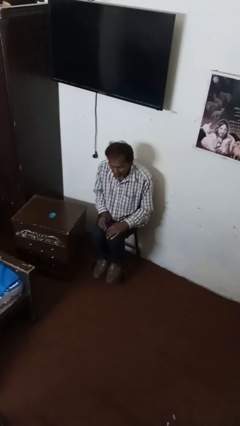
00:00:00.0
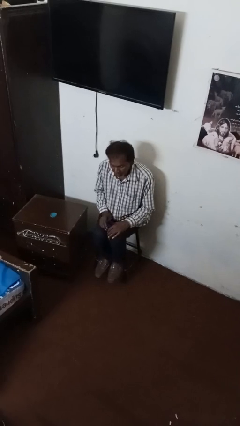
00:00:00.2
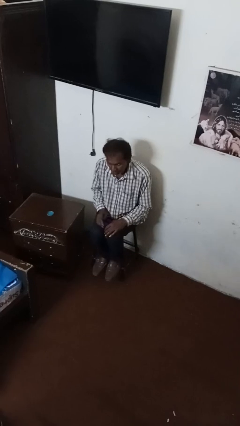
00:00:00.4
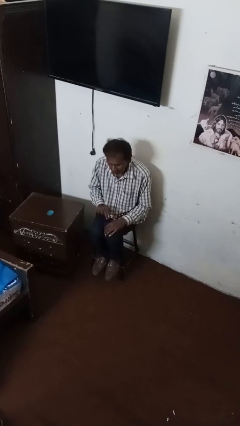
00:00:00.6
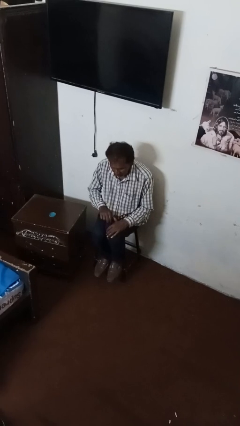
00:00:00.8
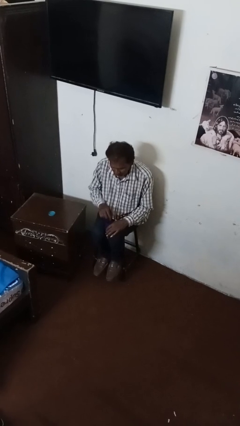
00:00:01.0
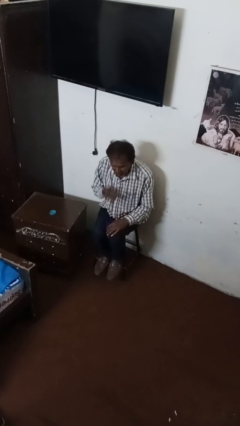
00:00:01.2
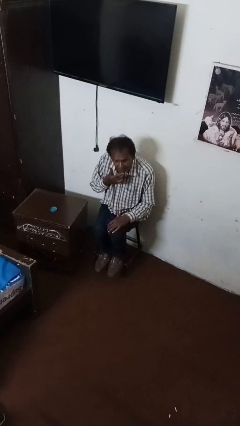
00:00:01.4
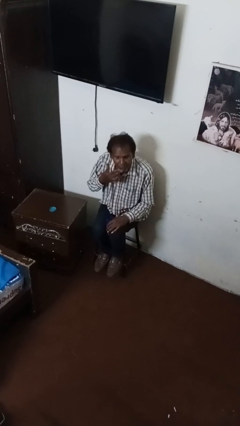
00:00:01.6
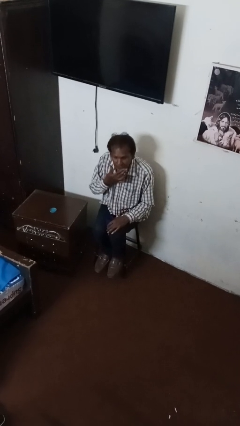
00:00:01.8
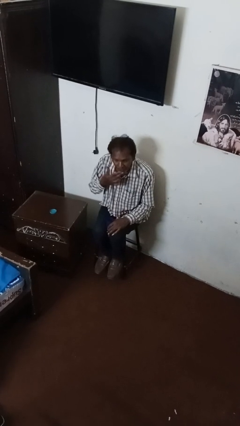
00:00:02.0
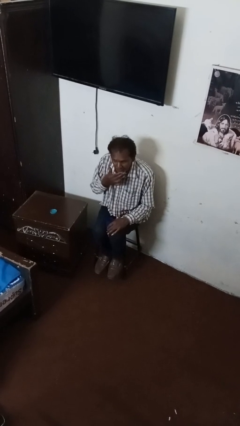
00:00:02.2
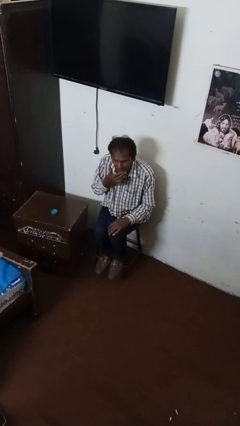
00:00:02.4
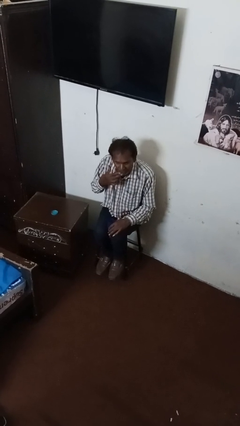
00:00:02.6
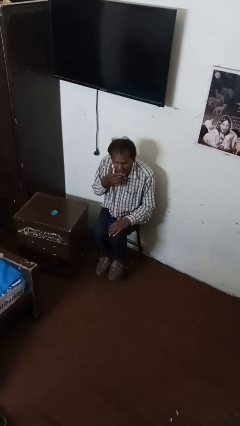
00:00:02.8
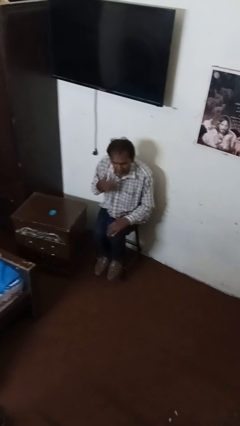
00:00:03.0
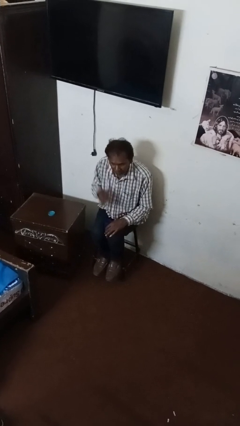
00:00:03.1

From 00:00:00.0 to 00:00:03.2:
person strokes chin

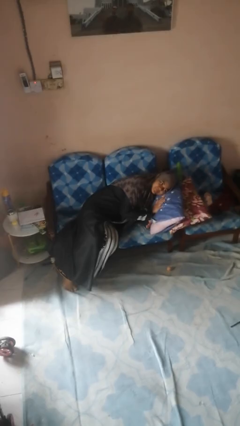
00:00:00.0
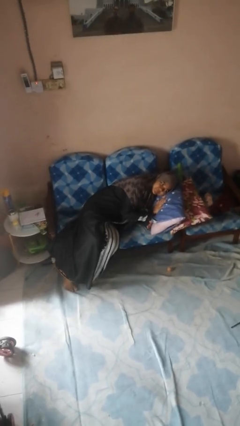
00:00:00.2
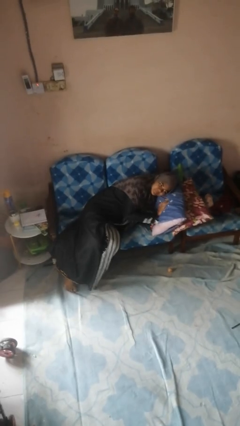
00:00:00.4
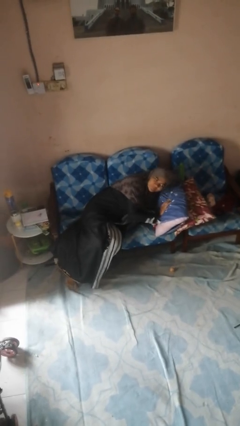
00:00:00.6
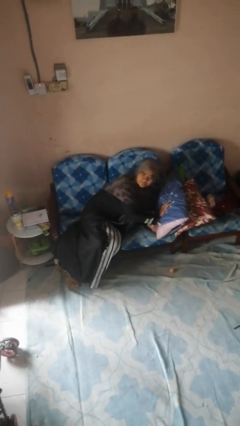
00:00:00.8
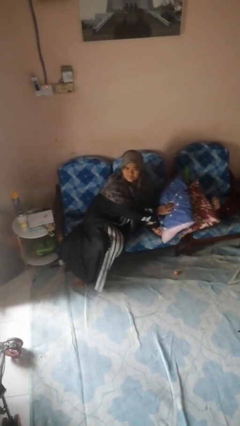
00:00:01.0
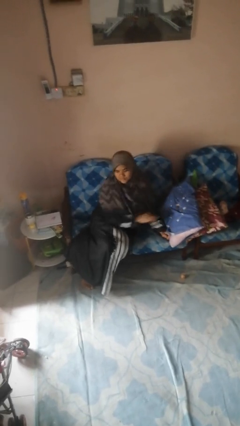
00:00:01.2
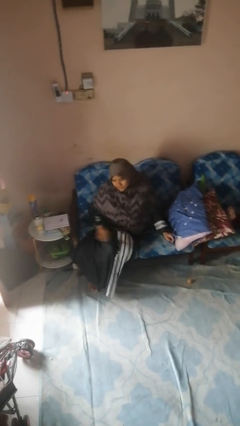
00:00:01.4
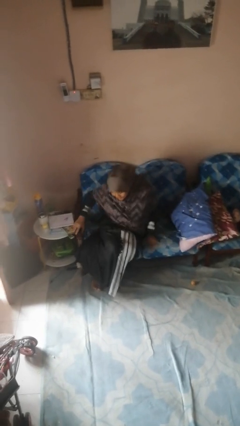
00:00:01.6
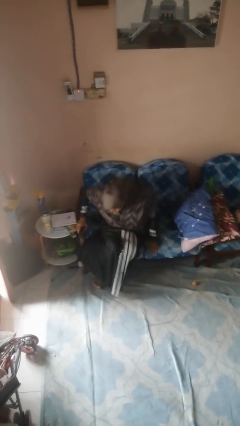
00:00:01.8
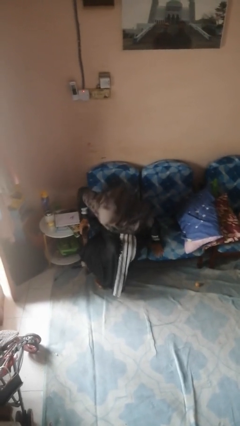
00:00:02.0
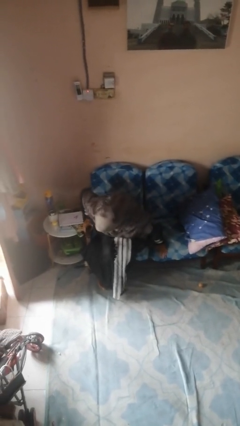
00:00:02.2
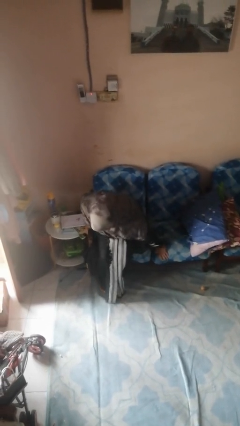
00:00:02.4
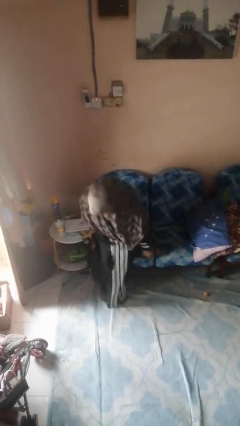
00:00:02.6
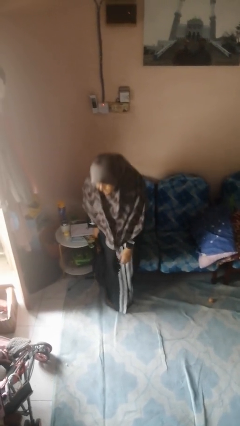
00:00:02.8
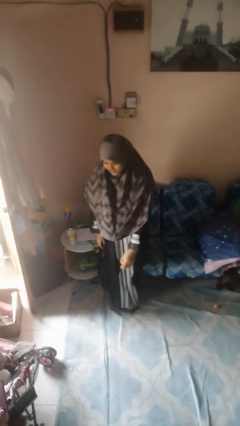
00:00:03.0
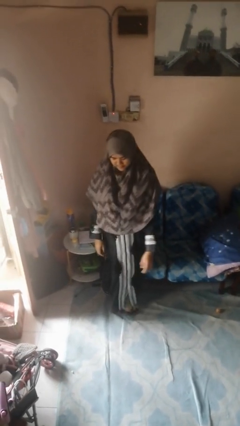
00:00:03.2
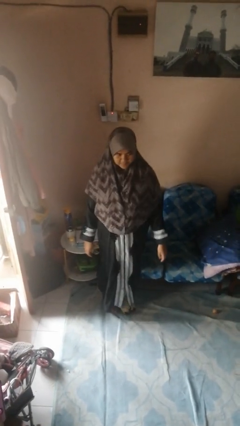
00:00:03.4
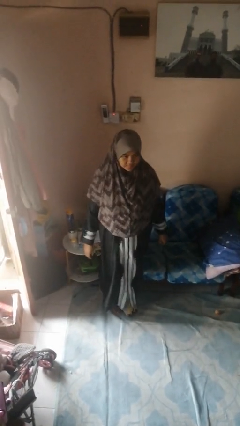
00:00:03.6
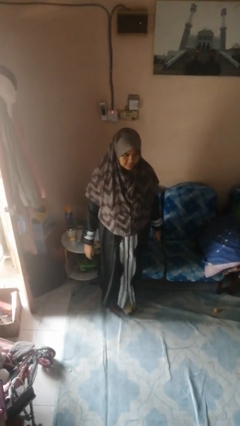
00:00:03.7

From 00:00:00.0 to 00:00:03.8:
person stands up

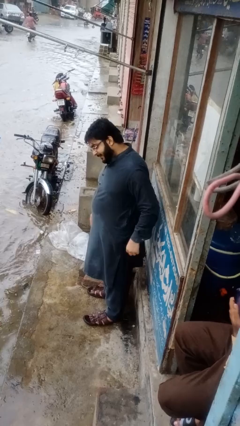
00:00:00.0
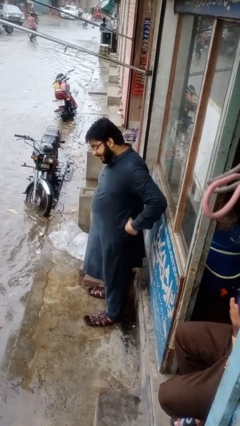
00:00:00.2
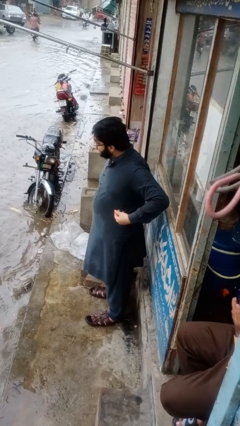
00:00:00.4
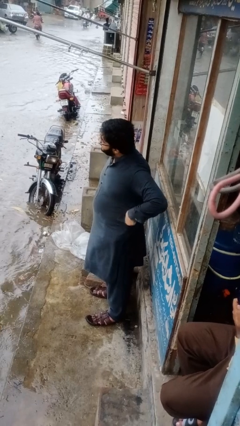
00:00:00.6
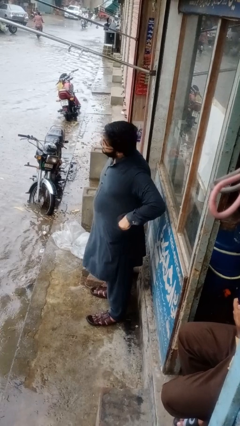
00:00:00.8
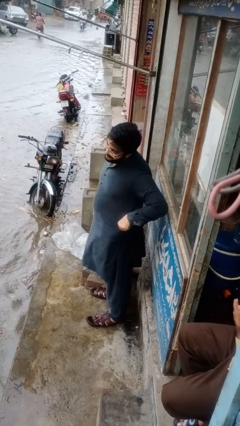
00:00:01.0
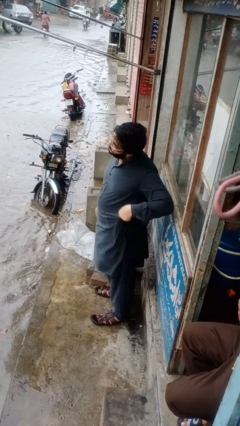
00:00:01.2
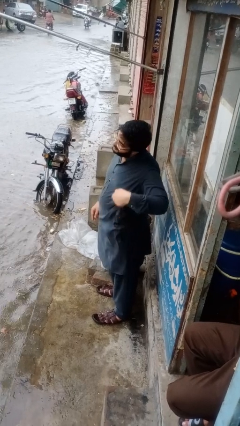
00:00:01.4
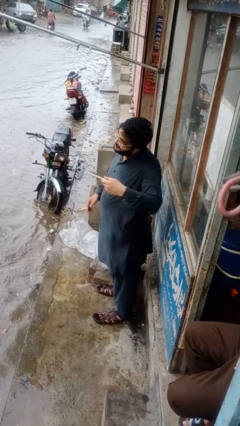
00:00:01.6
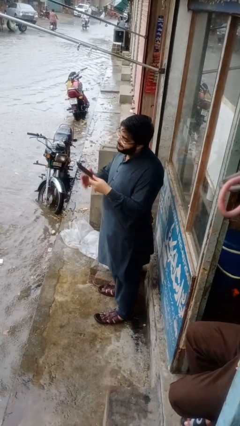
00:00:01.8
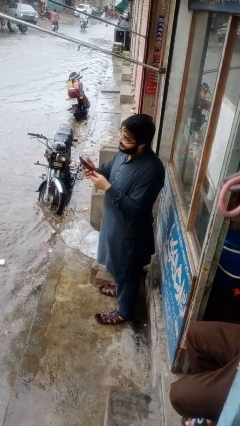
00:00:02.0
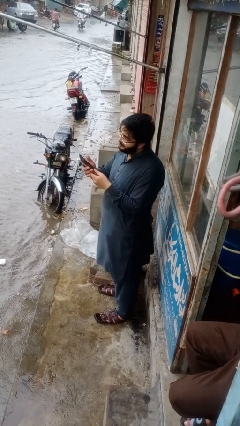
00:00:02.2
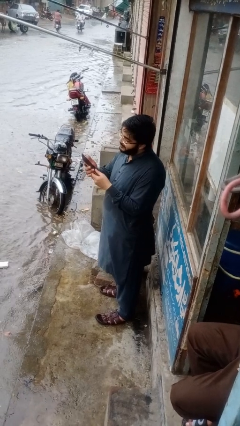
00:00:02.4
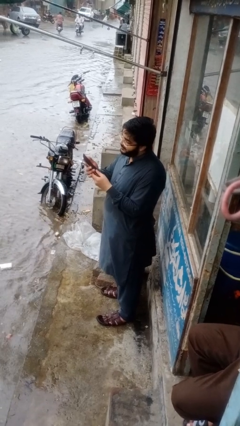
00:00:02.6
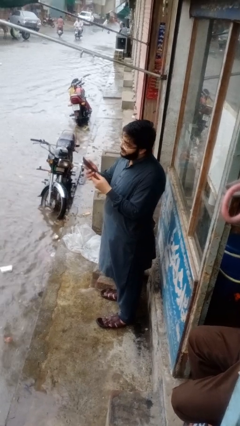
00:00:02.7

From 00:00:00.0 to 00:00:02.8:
person takes phone from pocket

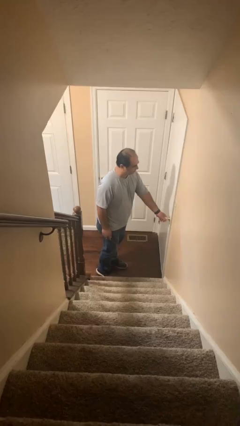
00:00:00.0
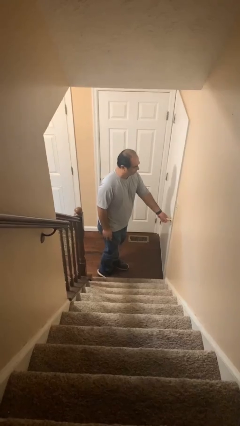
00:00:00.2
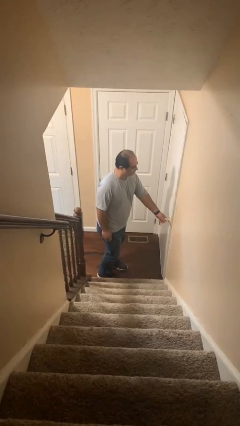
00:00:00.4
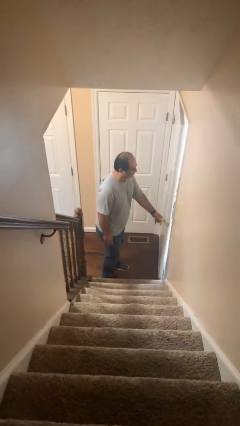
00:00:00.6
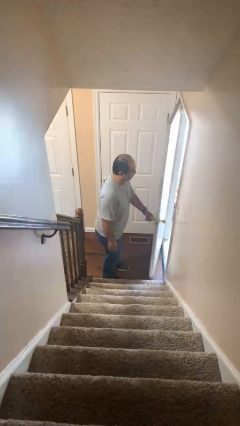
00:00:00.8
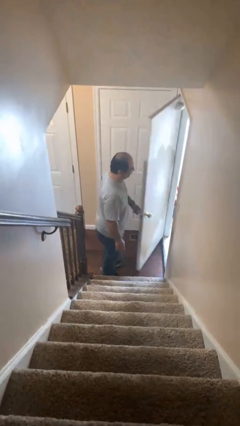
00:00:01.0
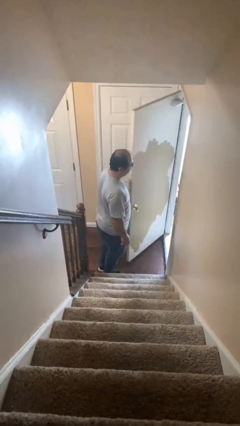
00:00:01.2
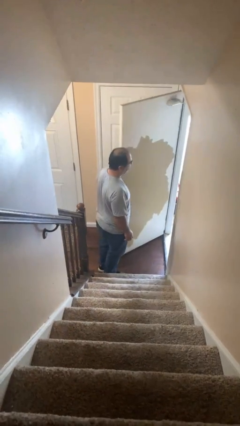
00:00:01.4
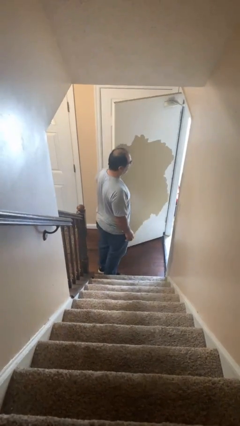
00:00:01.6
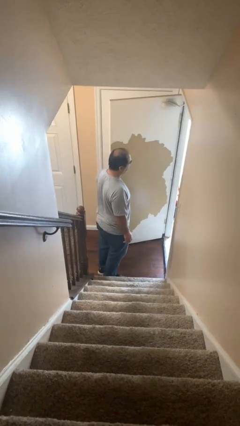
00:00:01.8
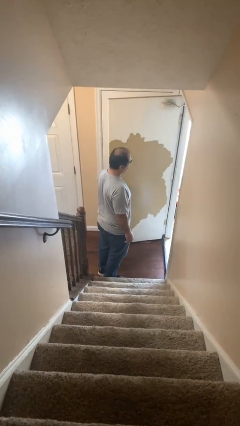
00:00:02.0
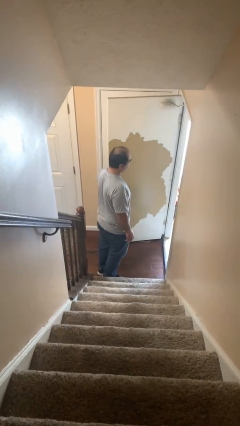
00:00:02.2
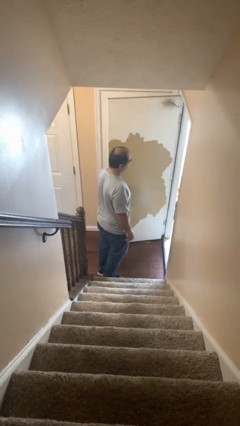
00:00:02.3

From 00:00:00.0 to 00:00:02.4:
person opens facility door

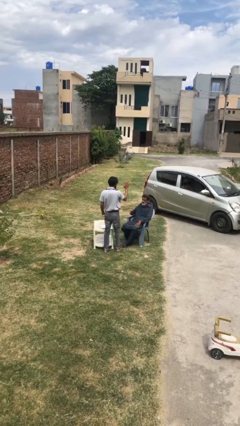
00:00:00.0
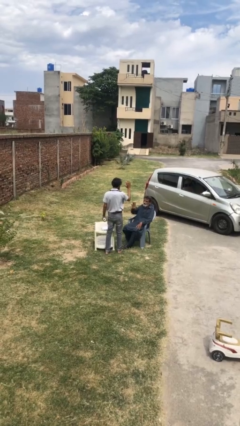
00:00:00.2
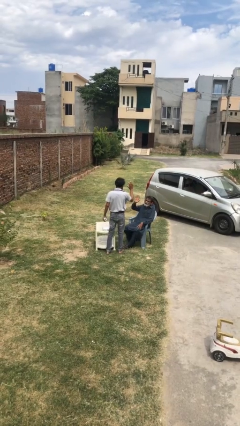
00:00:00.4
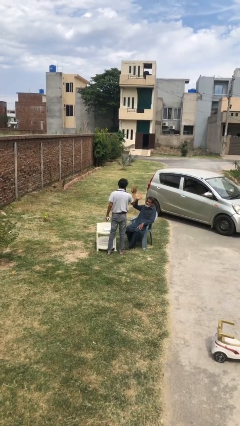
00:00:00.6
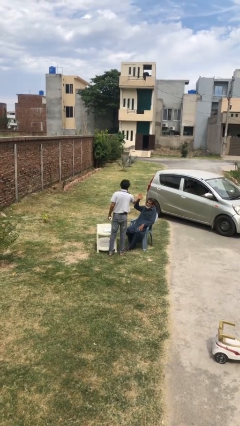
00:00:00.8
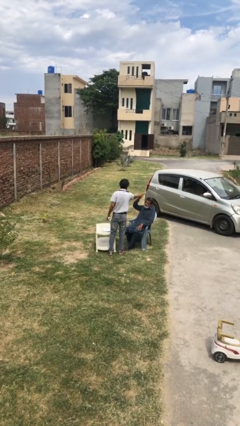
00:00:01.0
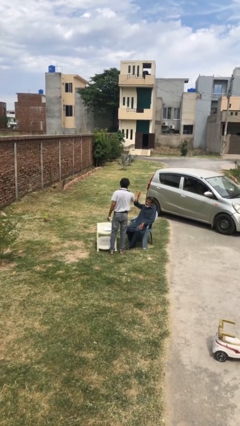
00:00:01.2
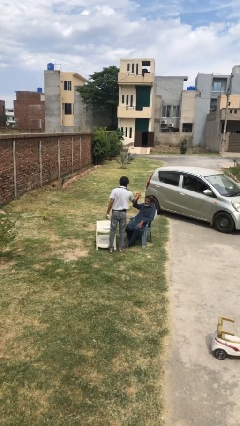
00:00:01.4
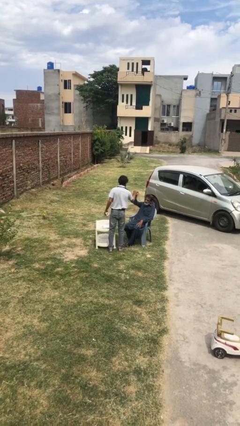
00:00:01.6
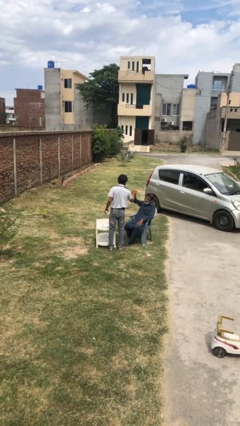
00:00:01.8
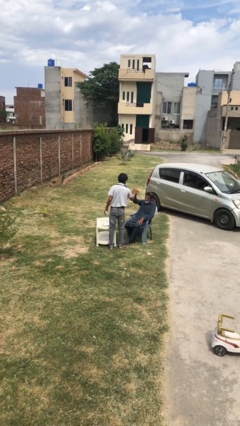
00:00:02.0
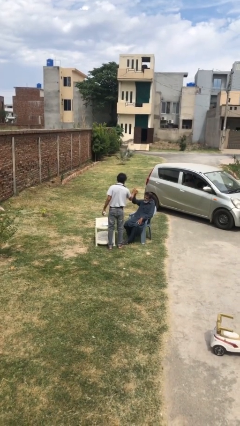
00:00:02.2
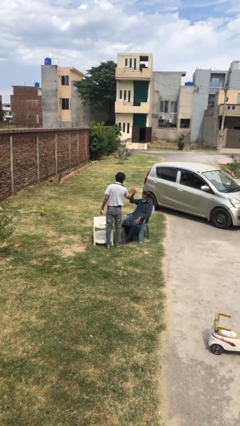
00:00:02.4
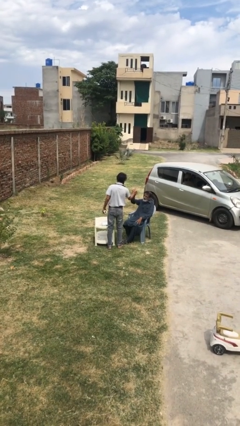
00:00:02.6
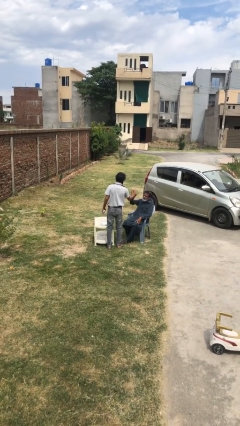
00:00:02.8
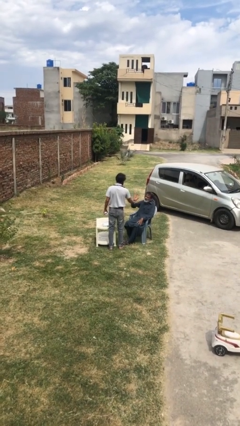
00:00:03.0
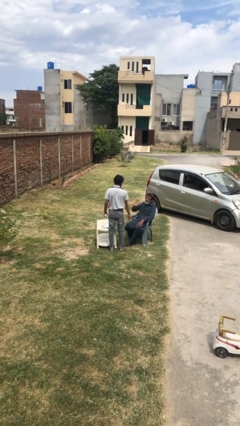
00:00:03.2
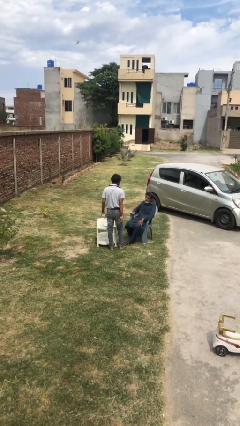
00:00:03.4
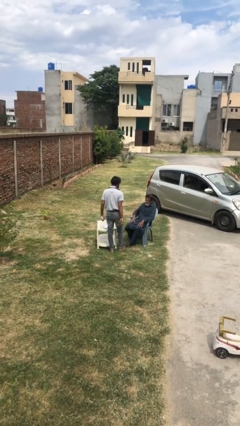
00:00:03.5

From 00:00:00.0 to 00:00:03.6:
person highfives hand

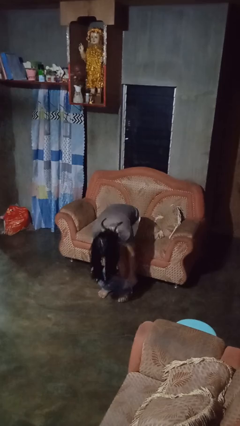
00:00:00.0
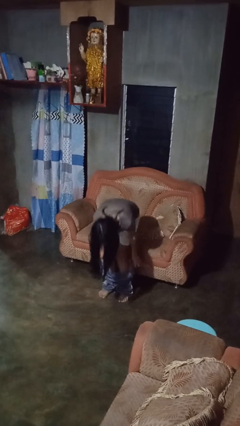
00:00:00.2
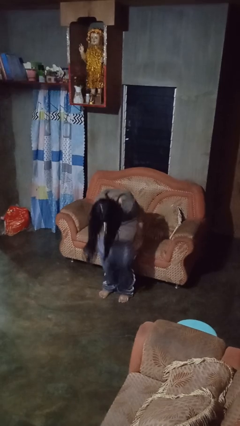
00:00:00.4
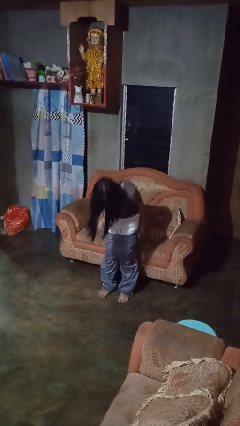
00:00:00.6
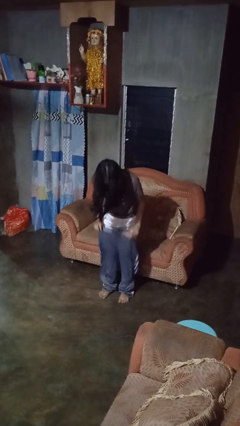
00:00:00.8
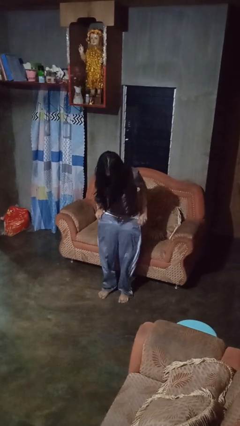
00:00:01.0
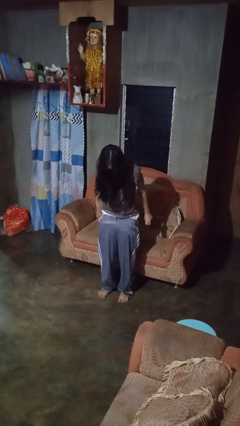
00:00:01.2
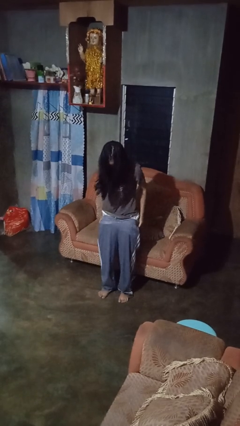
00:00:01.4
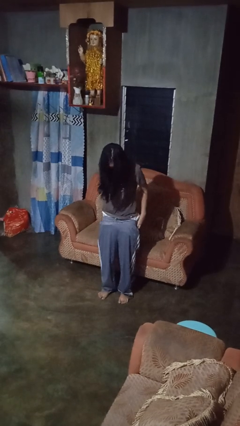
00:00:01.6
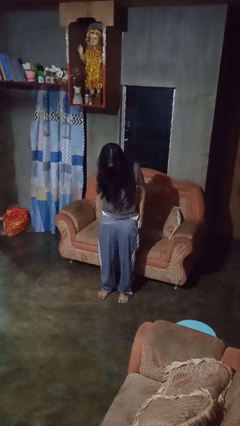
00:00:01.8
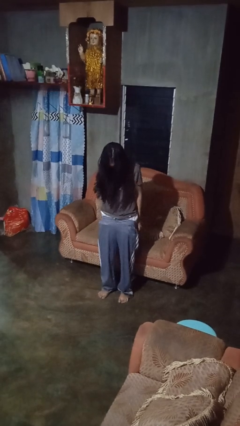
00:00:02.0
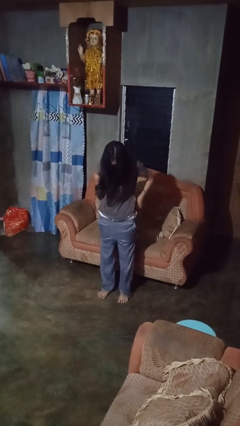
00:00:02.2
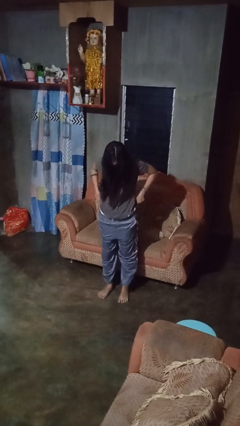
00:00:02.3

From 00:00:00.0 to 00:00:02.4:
person puts on pants
